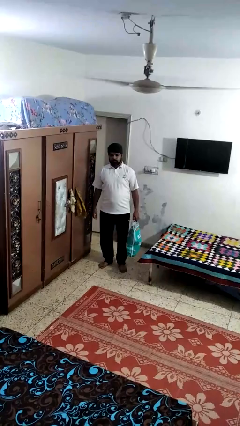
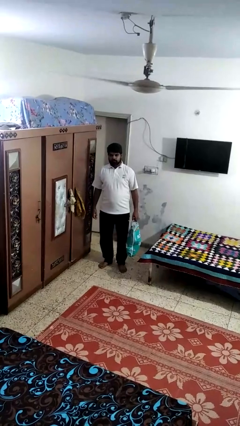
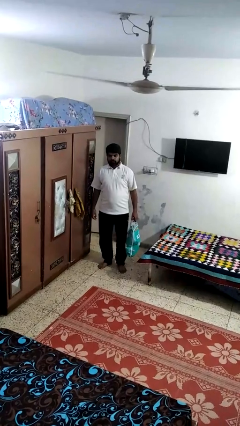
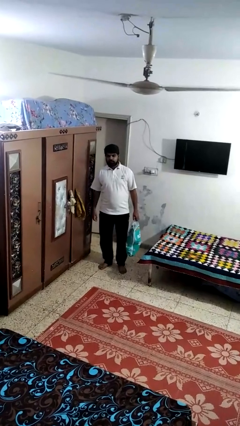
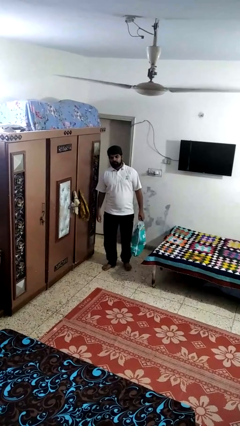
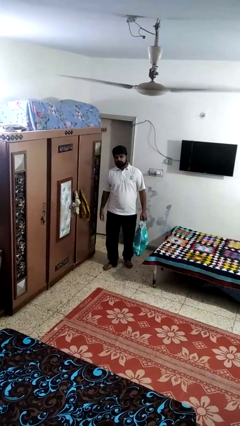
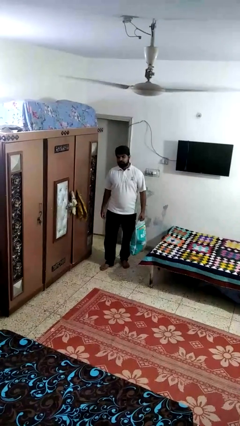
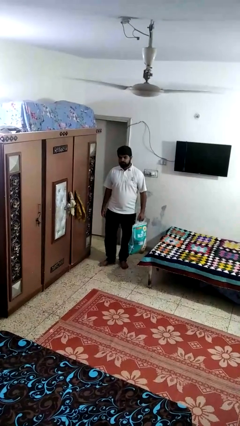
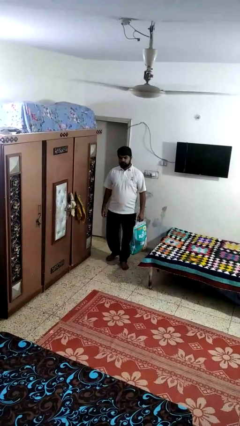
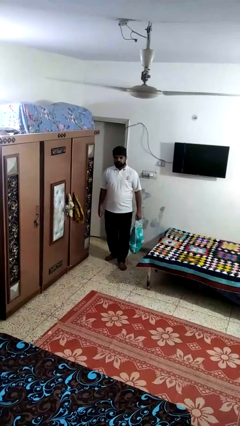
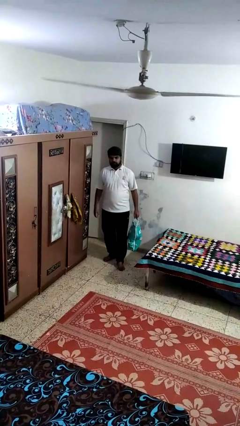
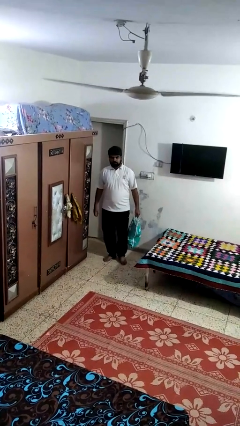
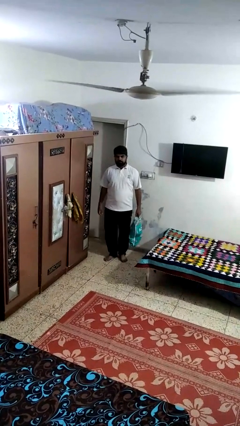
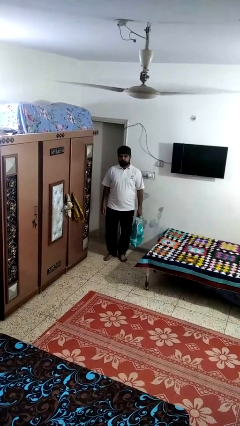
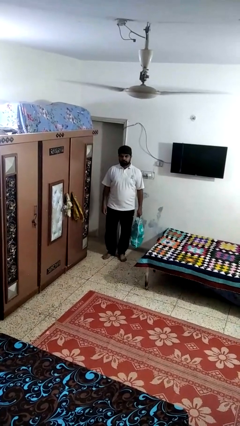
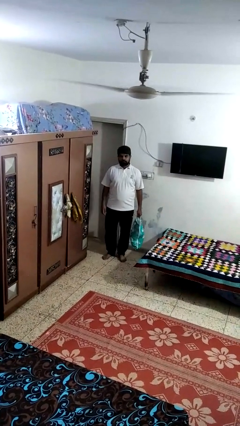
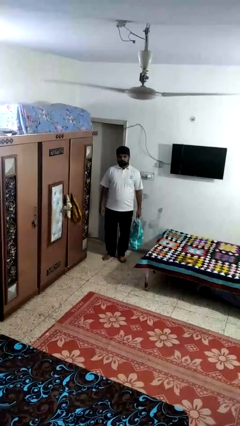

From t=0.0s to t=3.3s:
person carries groceries

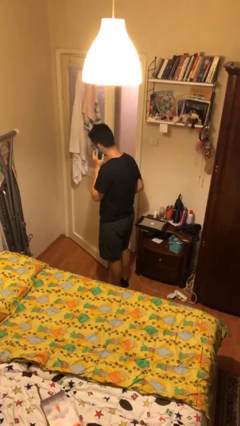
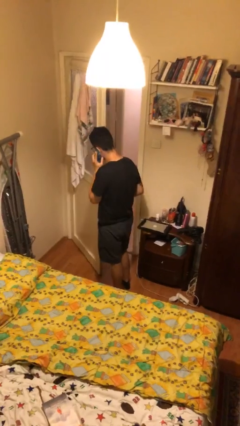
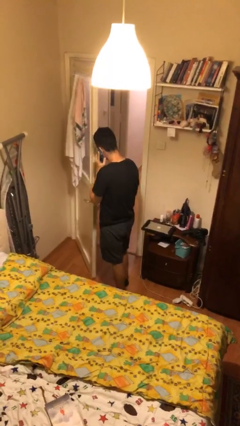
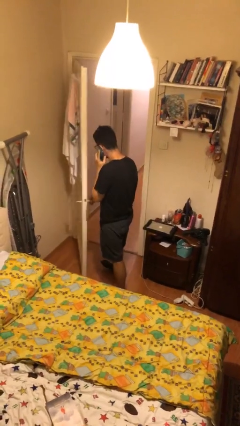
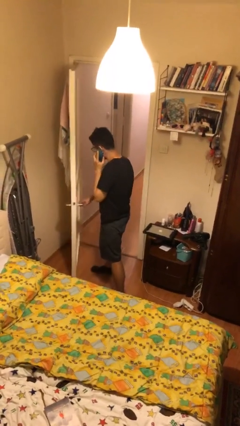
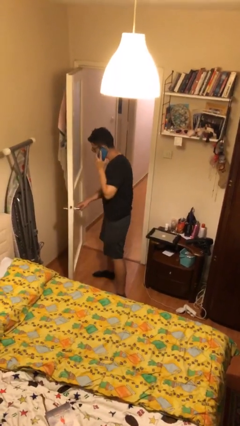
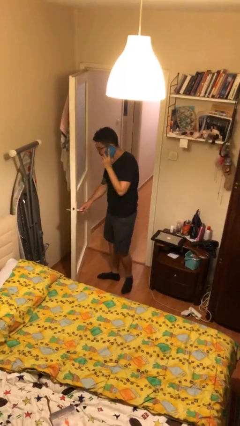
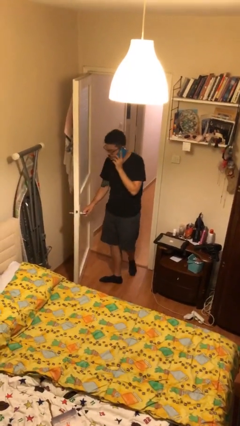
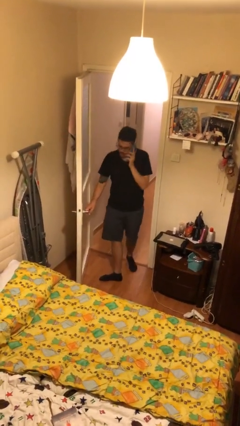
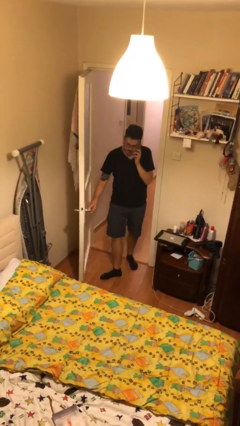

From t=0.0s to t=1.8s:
person exits scene through structure

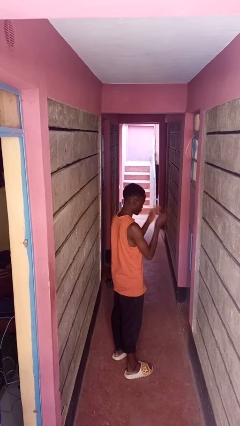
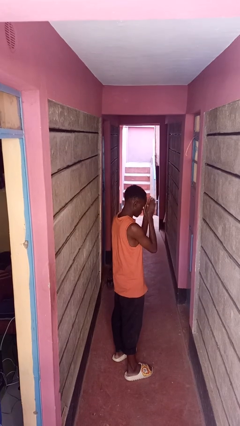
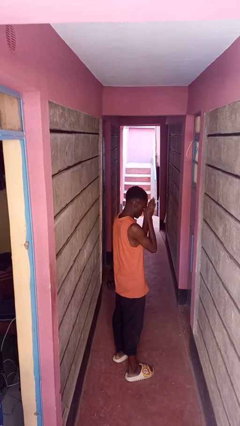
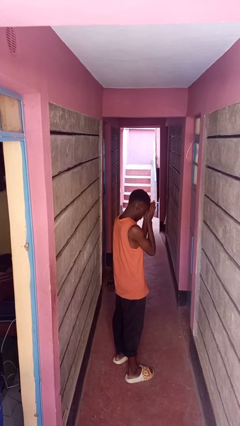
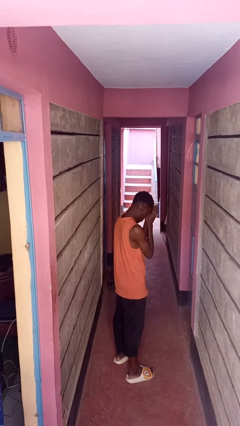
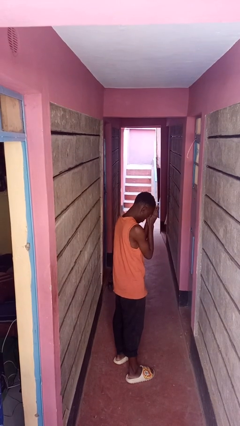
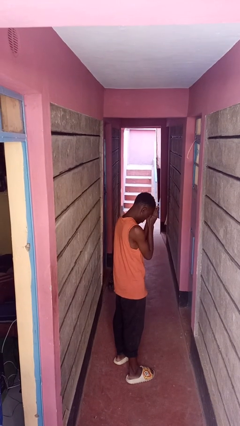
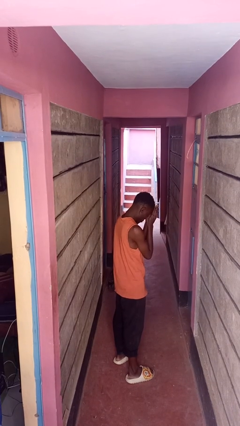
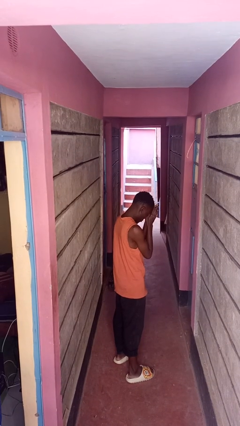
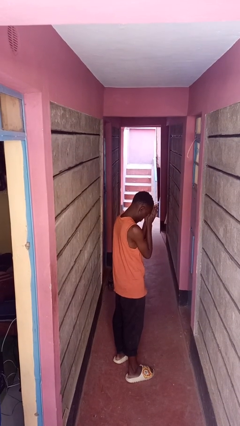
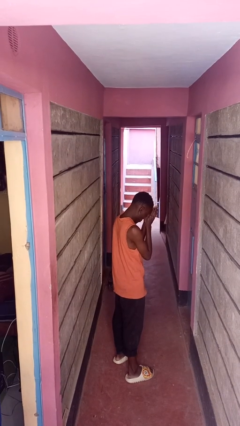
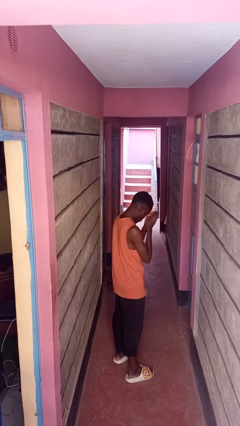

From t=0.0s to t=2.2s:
person prays

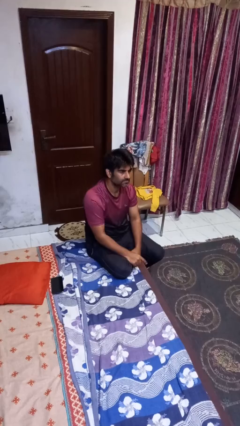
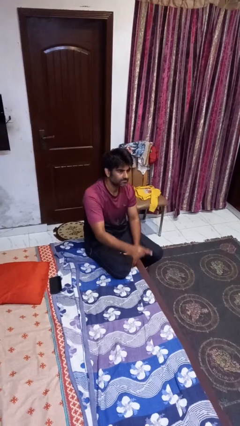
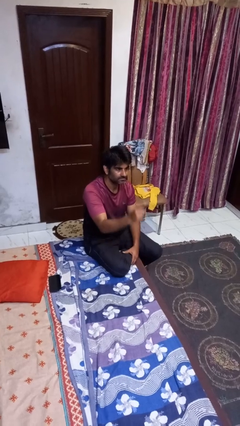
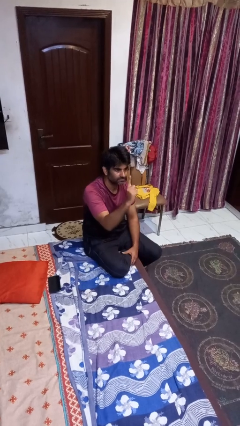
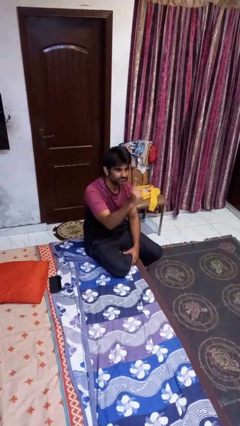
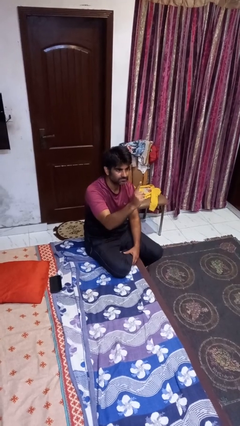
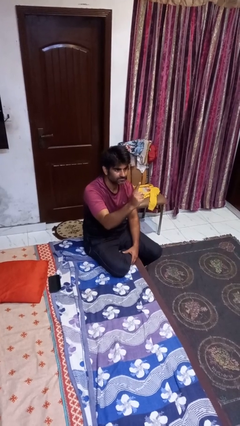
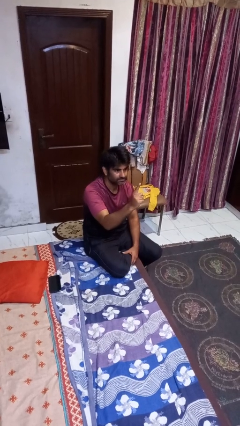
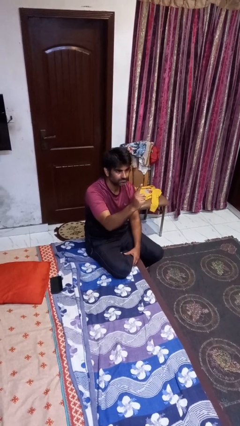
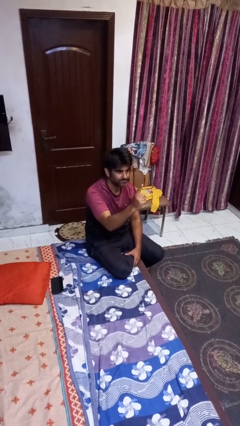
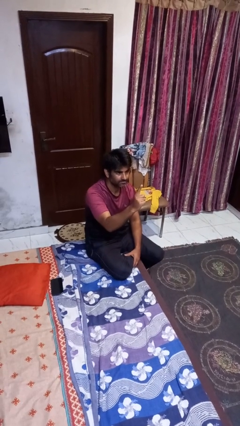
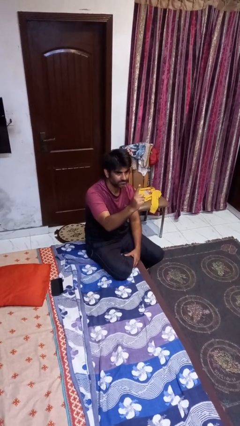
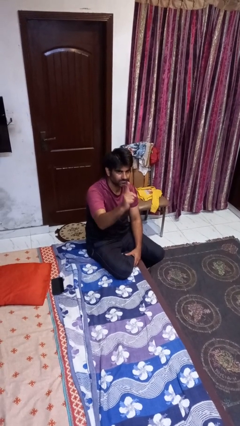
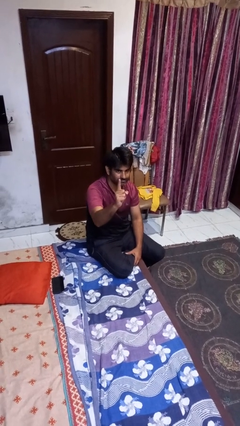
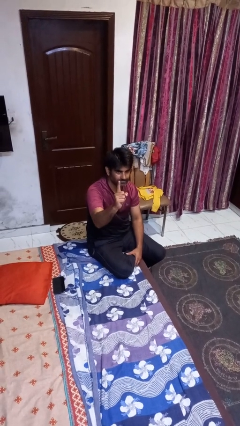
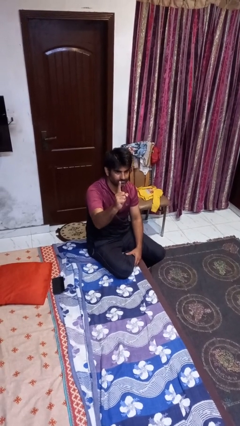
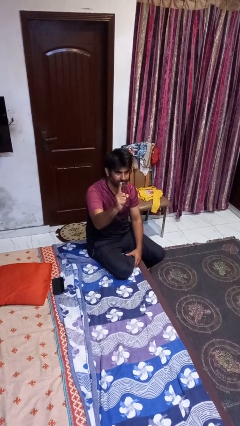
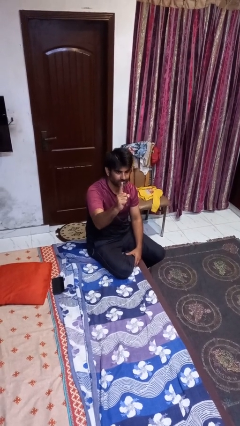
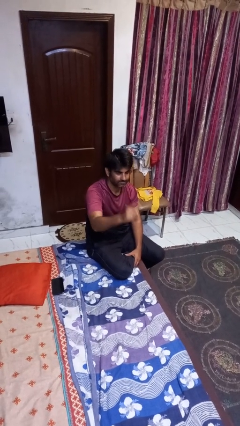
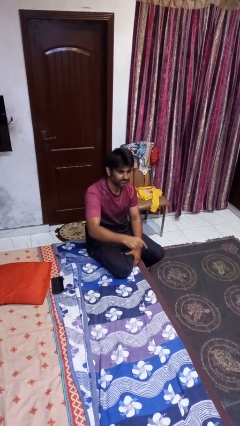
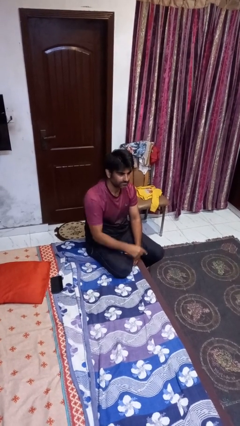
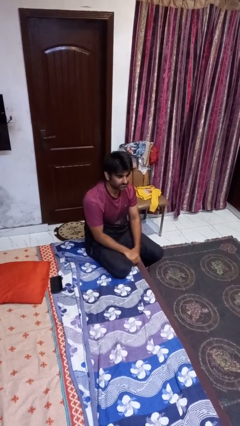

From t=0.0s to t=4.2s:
person gestures number one

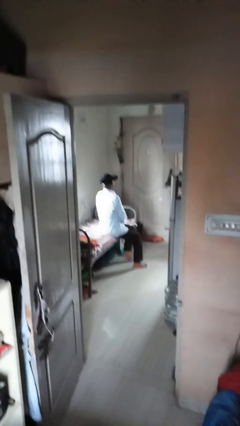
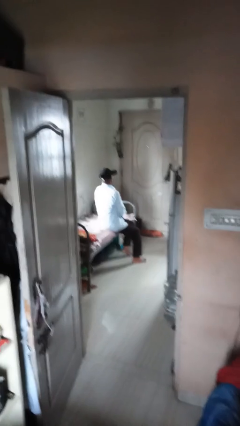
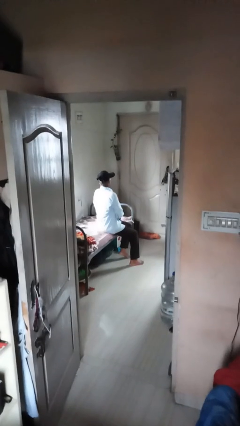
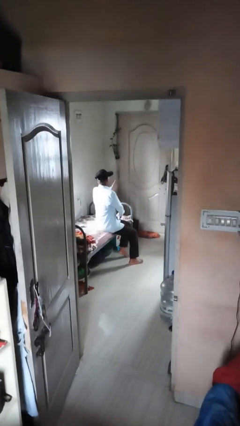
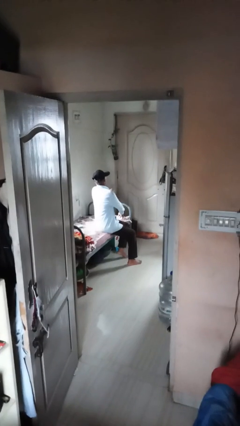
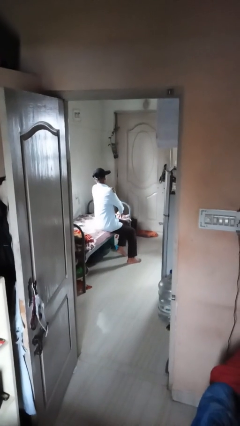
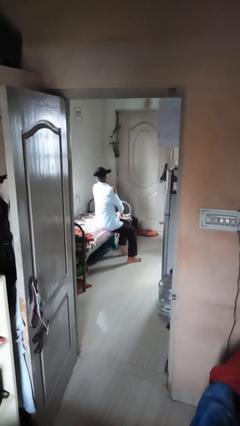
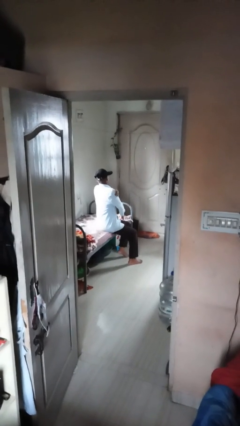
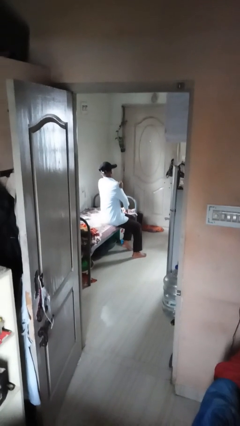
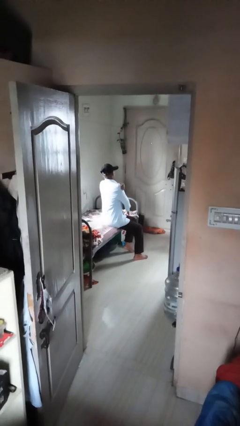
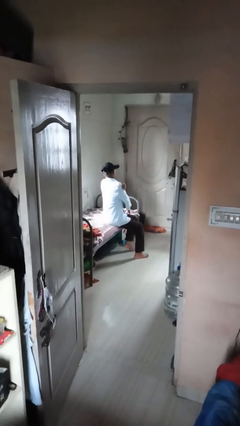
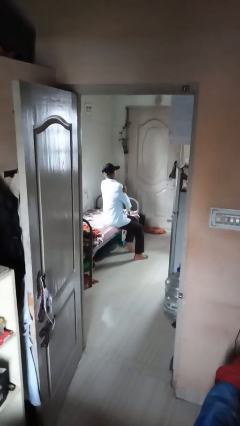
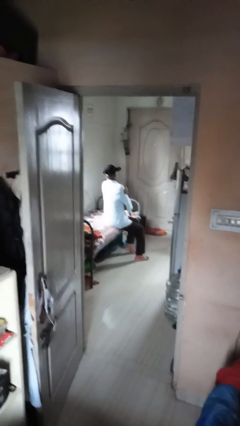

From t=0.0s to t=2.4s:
person swats bug

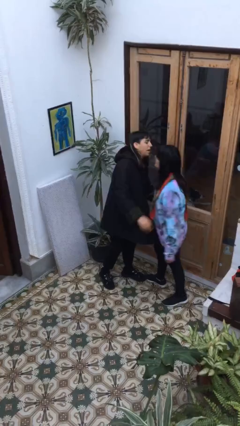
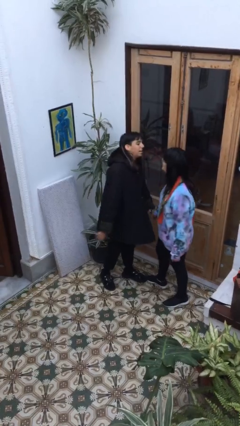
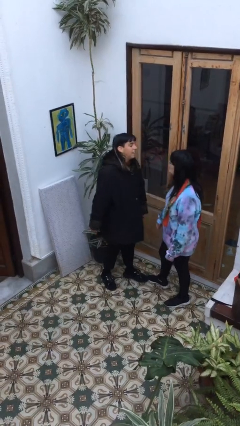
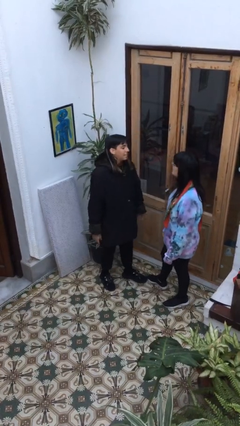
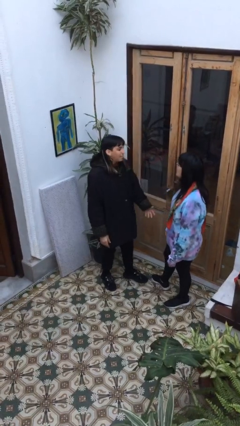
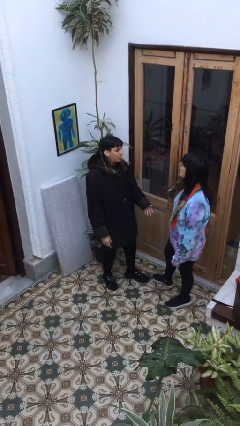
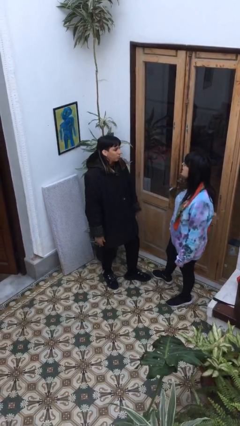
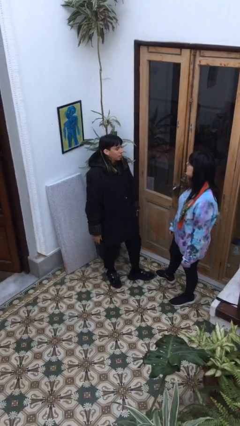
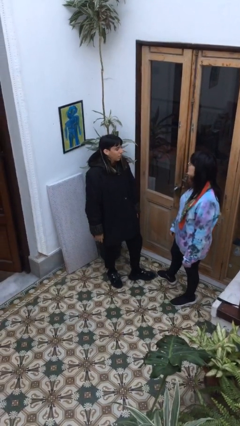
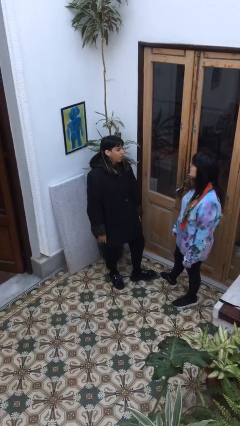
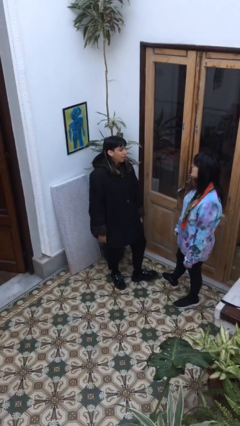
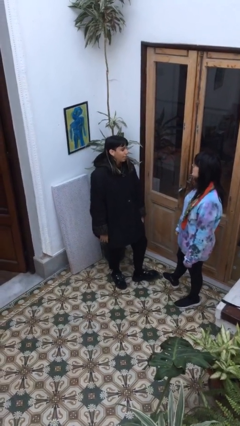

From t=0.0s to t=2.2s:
person talks to person

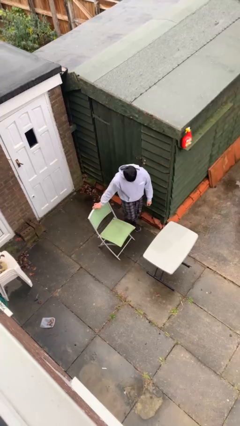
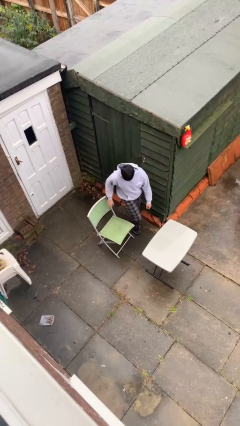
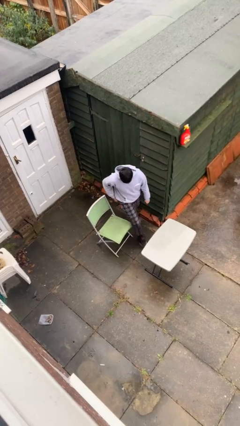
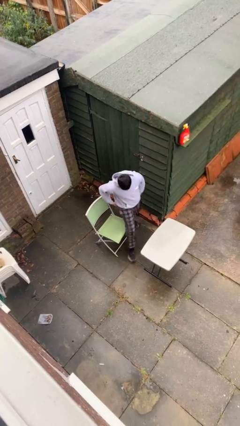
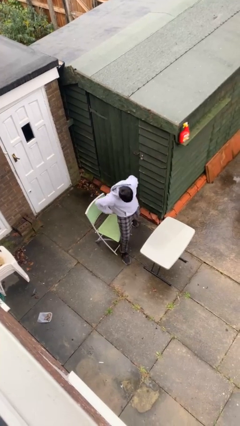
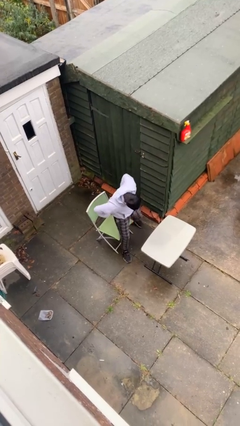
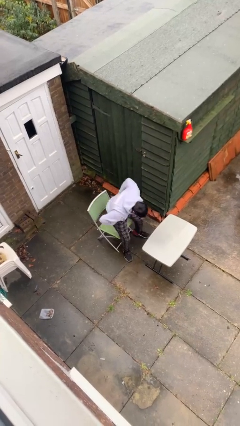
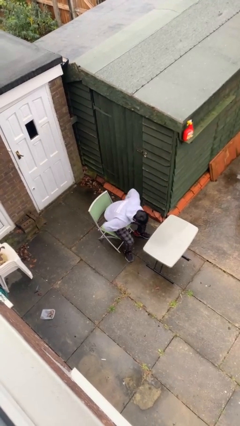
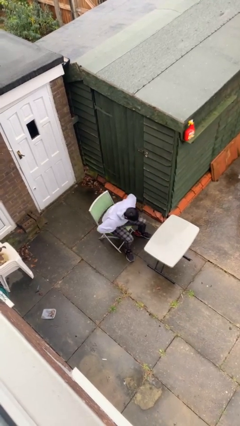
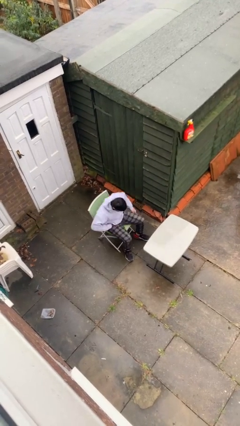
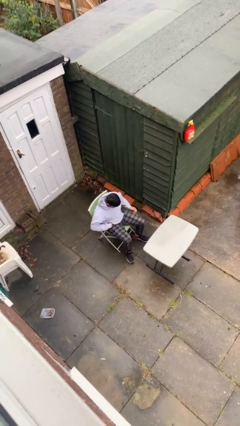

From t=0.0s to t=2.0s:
person sits down
